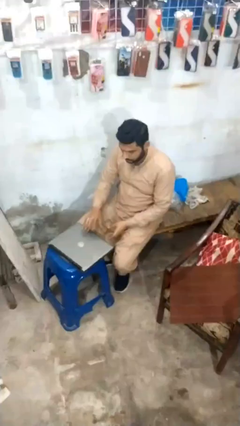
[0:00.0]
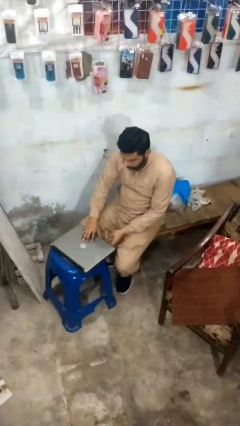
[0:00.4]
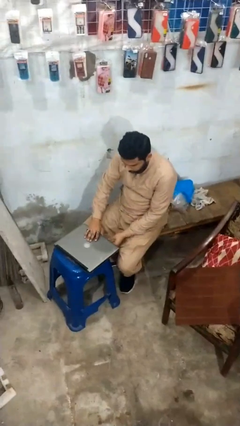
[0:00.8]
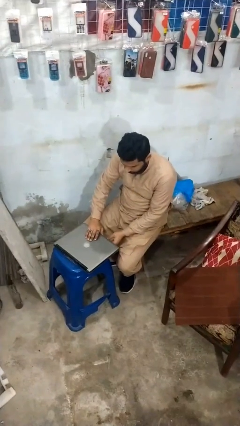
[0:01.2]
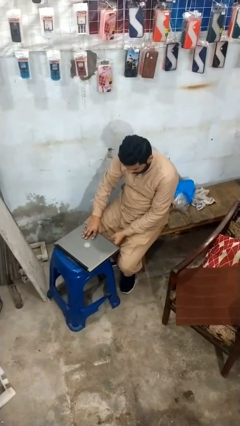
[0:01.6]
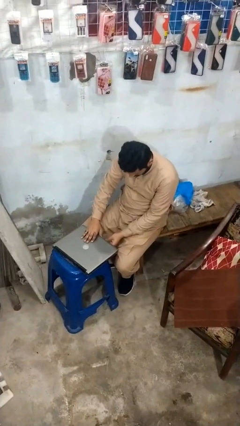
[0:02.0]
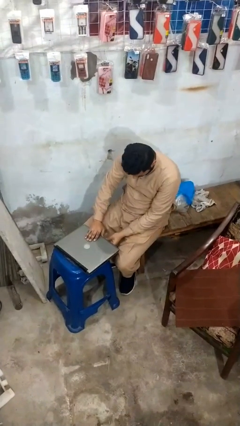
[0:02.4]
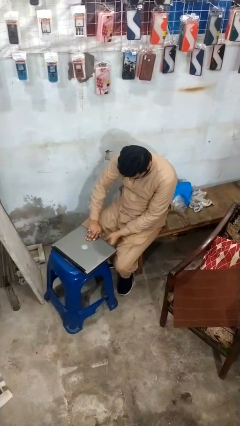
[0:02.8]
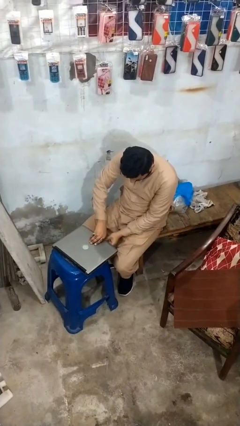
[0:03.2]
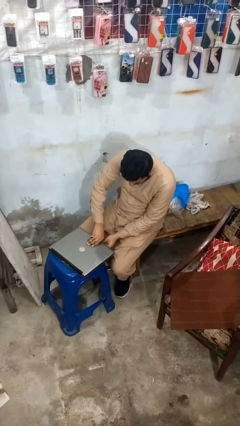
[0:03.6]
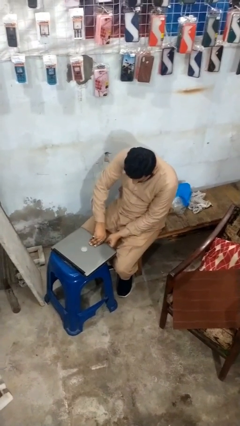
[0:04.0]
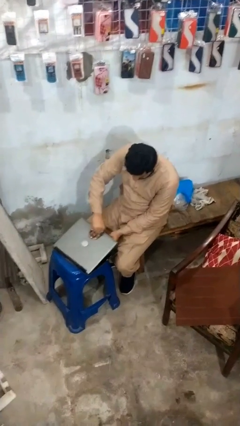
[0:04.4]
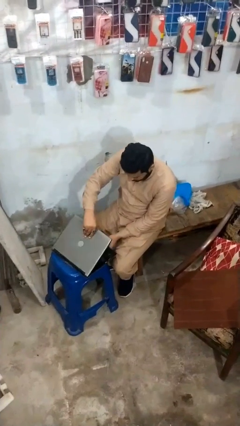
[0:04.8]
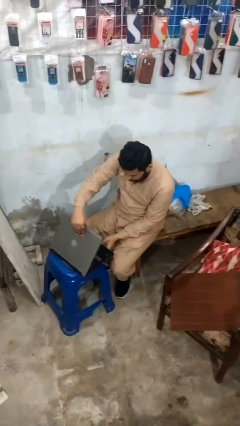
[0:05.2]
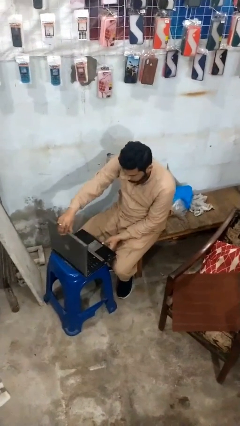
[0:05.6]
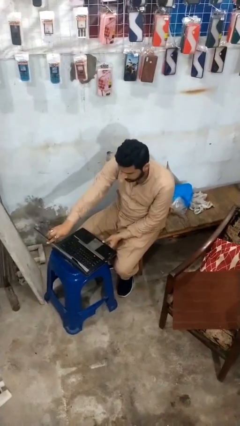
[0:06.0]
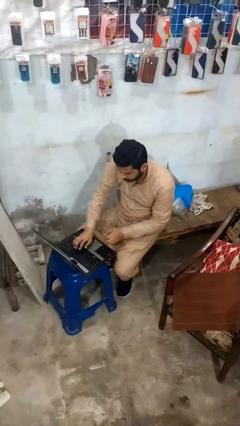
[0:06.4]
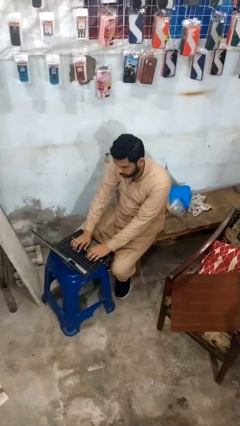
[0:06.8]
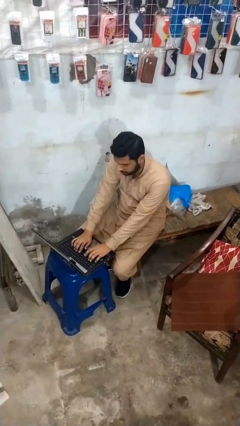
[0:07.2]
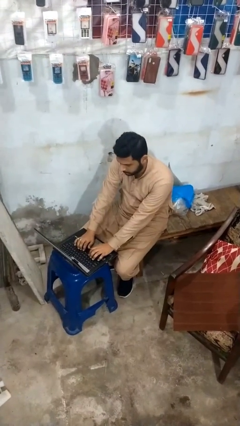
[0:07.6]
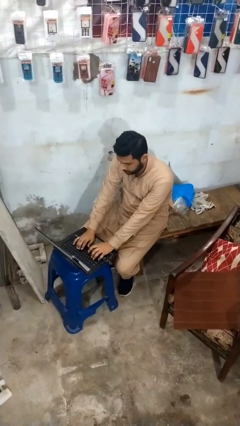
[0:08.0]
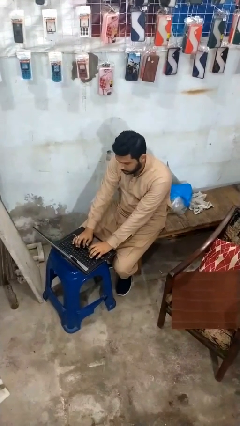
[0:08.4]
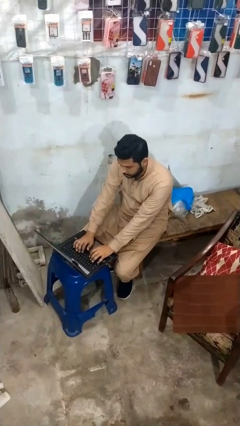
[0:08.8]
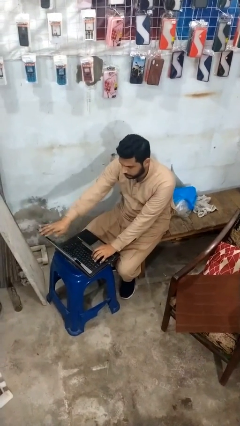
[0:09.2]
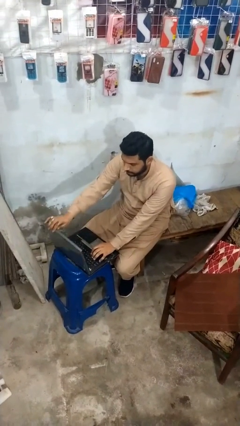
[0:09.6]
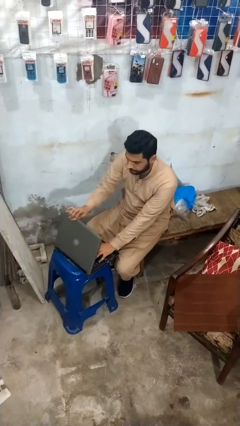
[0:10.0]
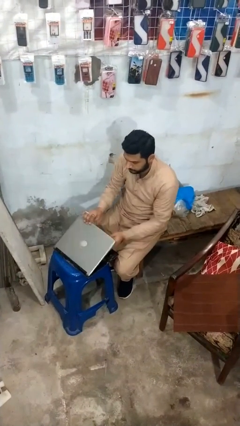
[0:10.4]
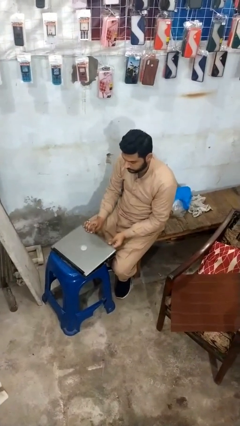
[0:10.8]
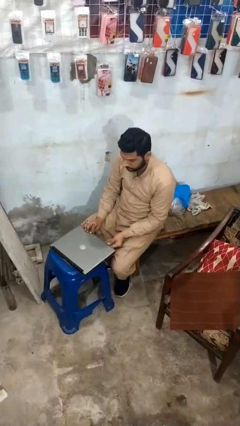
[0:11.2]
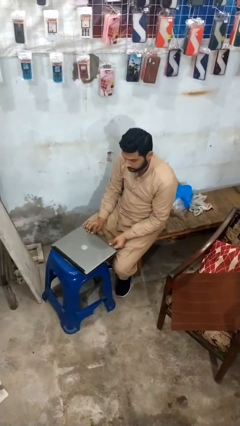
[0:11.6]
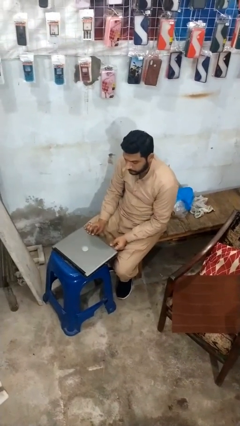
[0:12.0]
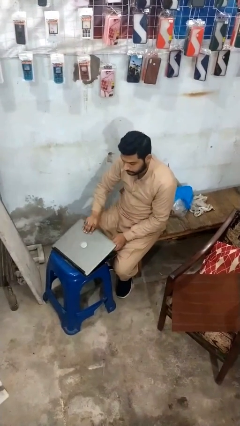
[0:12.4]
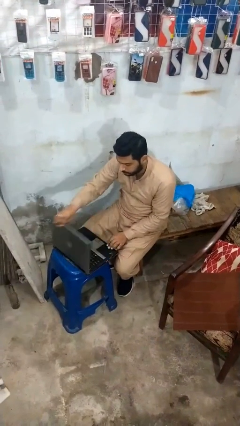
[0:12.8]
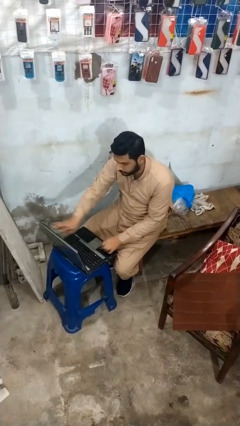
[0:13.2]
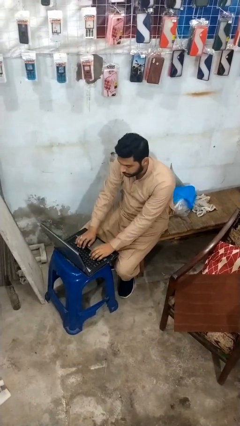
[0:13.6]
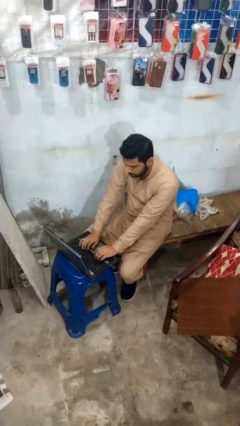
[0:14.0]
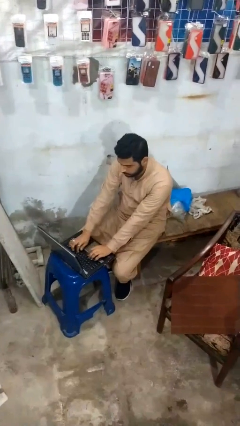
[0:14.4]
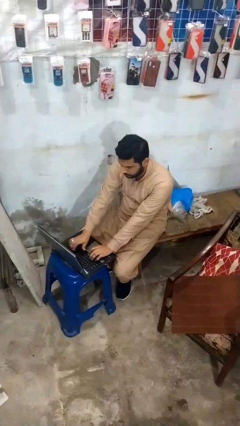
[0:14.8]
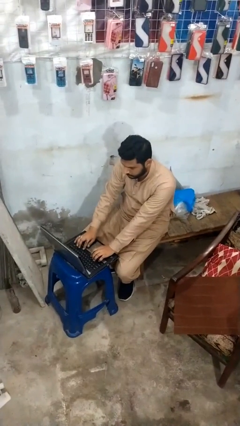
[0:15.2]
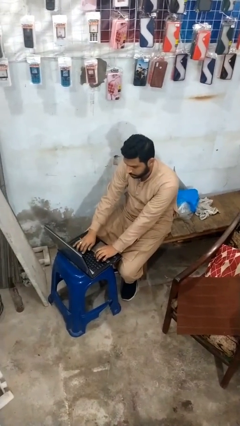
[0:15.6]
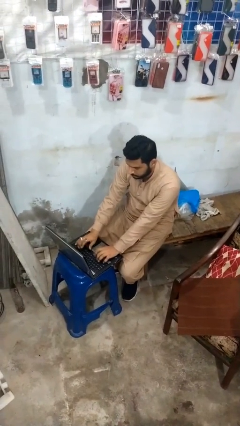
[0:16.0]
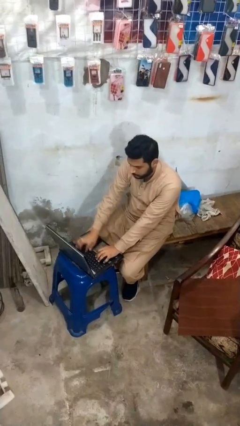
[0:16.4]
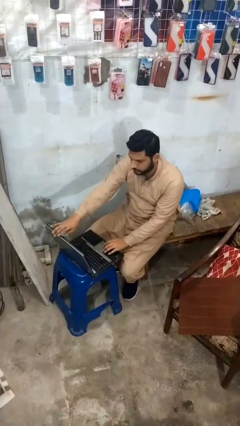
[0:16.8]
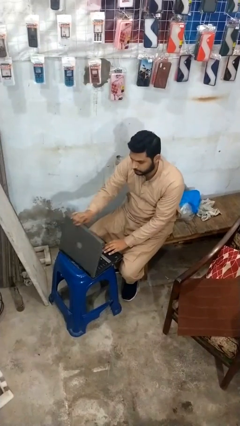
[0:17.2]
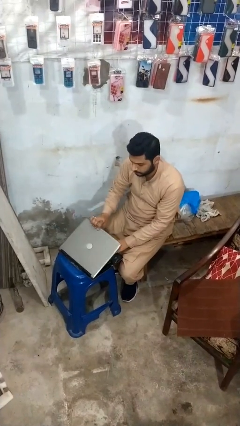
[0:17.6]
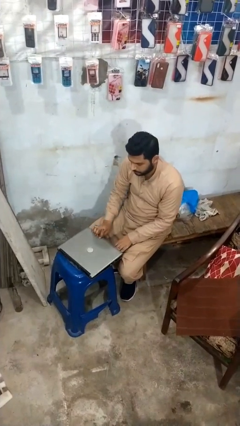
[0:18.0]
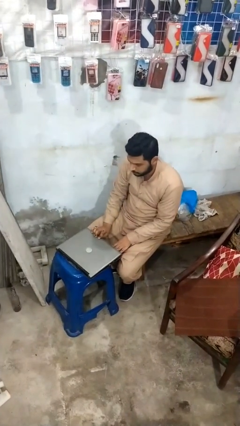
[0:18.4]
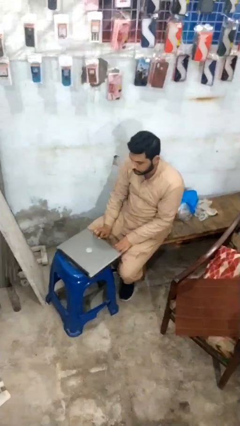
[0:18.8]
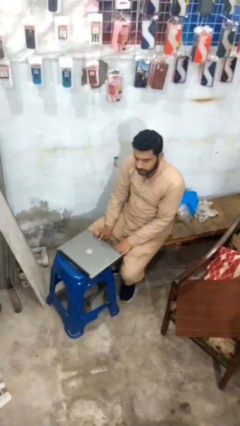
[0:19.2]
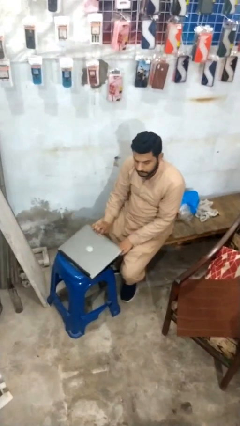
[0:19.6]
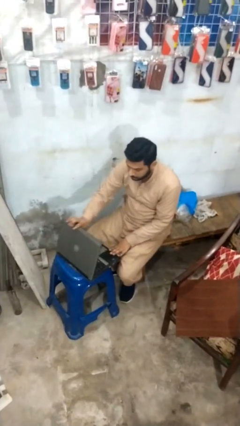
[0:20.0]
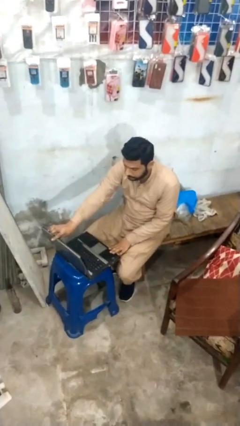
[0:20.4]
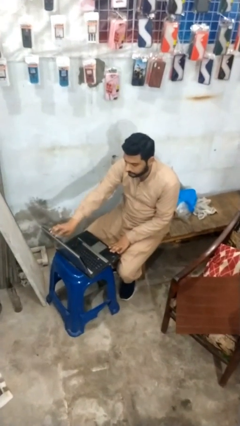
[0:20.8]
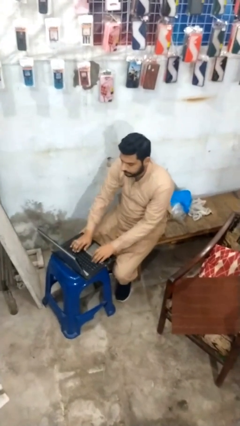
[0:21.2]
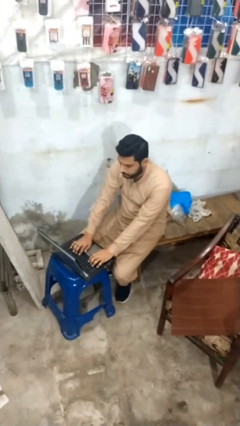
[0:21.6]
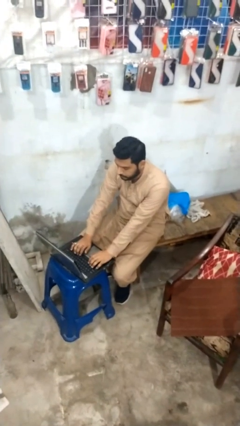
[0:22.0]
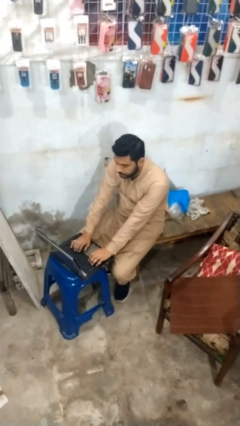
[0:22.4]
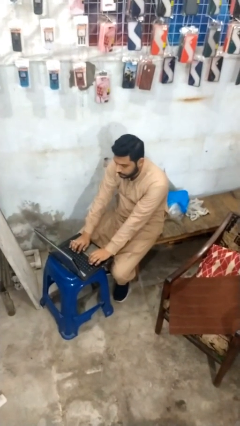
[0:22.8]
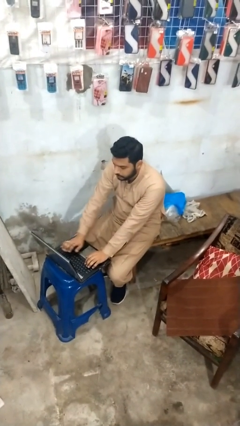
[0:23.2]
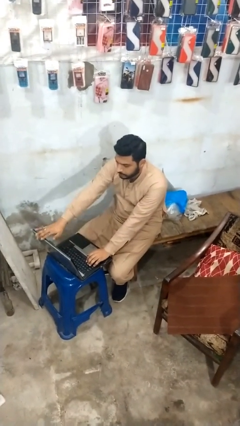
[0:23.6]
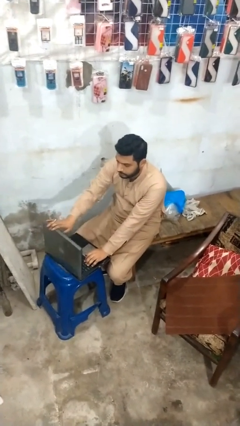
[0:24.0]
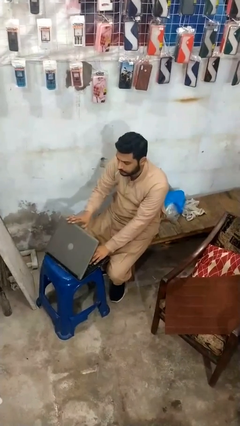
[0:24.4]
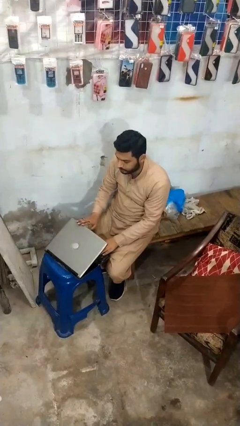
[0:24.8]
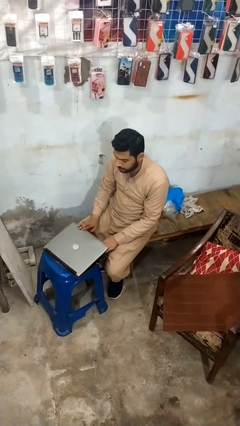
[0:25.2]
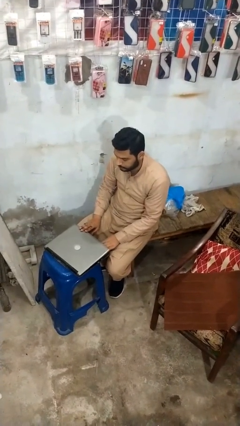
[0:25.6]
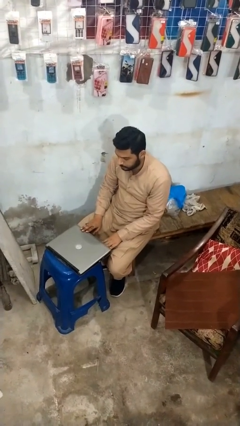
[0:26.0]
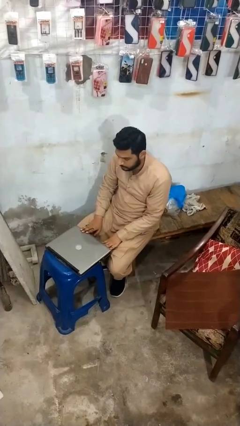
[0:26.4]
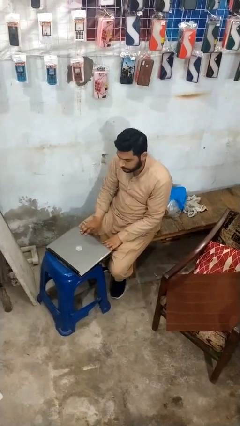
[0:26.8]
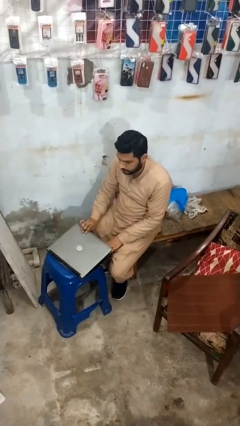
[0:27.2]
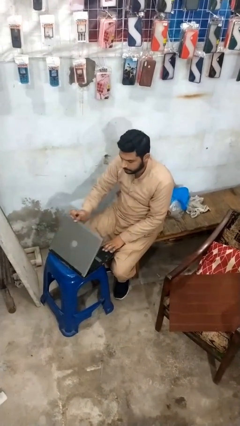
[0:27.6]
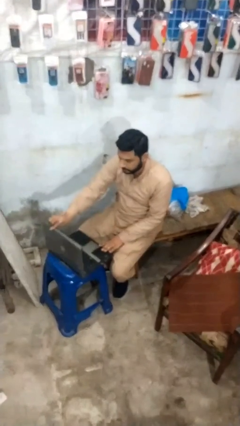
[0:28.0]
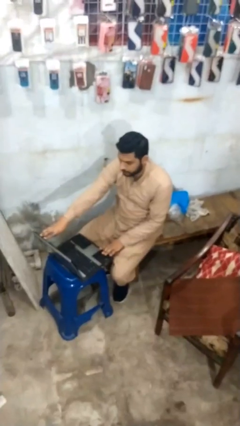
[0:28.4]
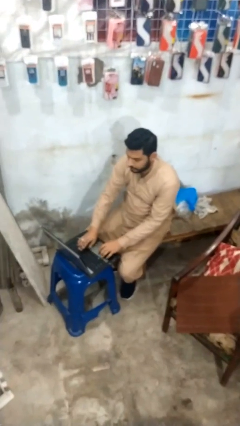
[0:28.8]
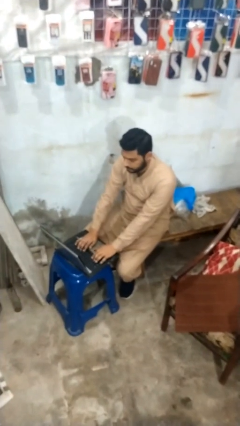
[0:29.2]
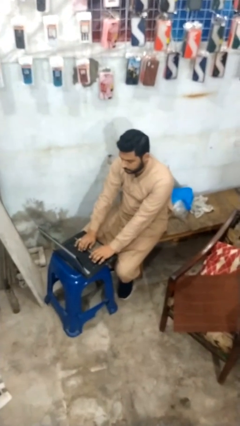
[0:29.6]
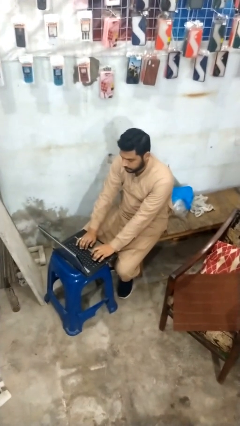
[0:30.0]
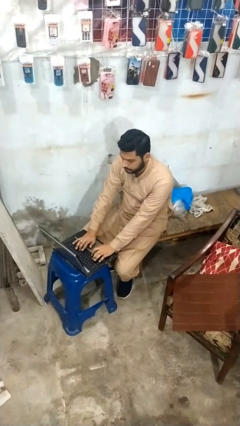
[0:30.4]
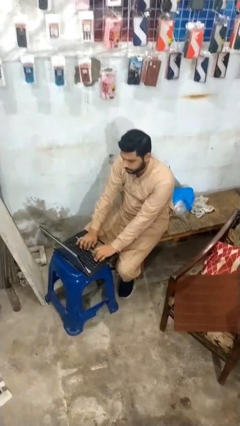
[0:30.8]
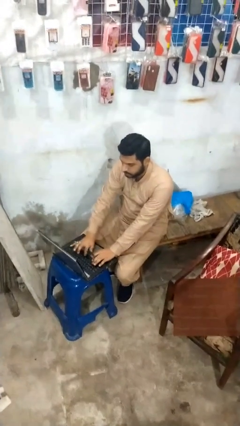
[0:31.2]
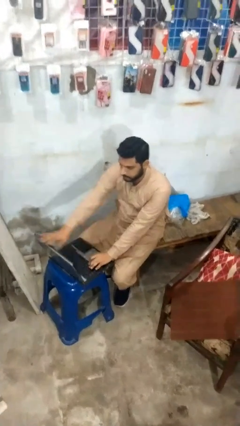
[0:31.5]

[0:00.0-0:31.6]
person interacts with laptop

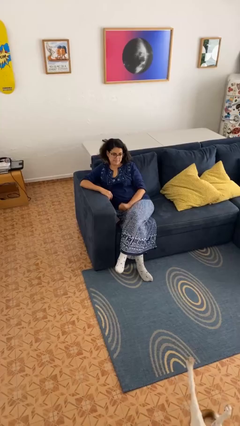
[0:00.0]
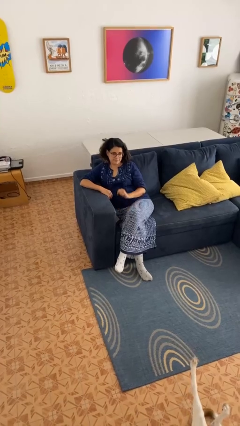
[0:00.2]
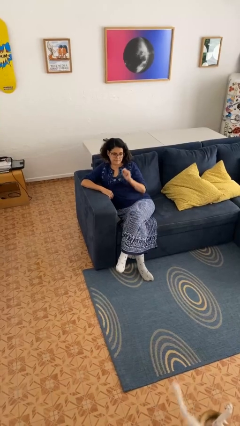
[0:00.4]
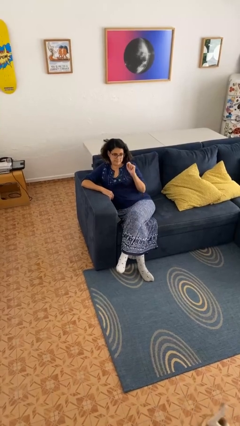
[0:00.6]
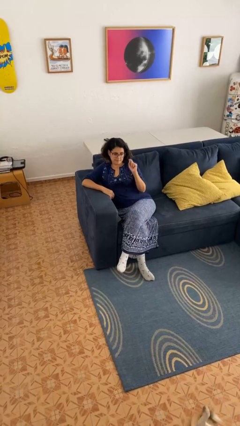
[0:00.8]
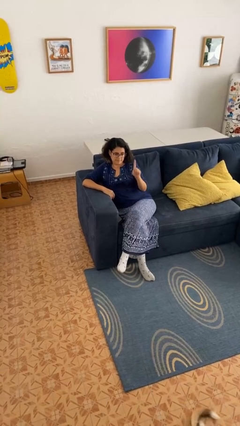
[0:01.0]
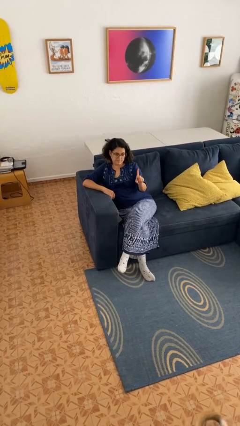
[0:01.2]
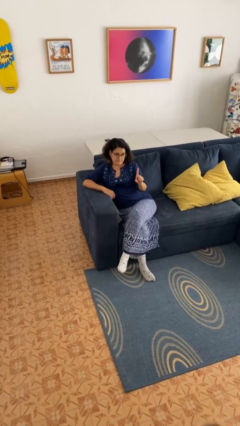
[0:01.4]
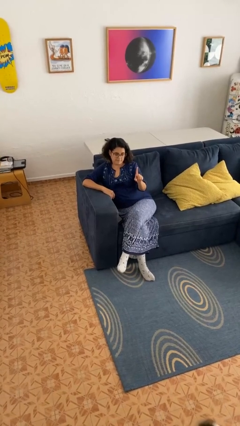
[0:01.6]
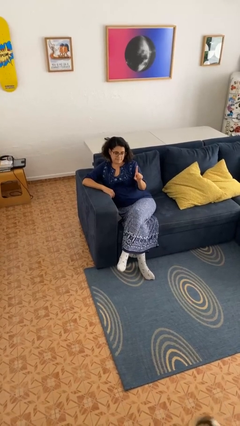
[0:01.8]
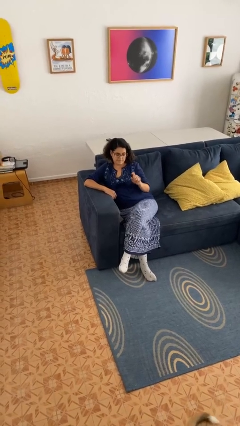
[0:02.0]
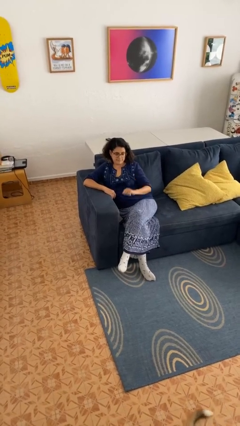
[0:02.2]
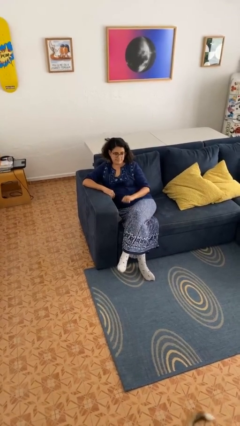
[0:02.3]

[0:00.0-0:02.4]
person gestures number one
